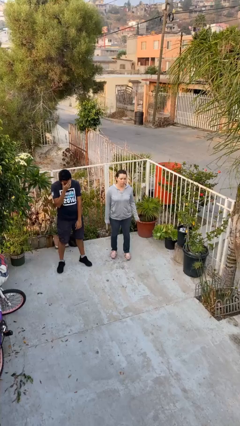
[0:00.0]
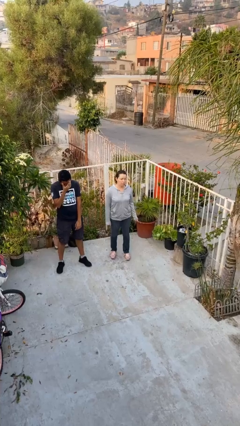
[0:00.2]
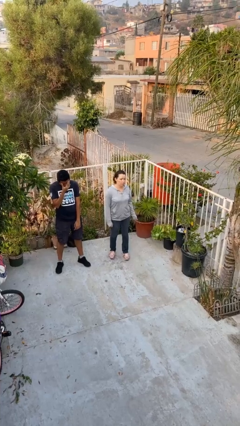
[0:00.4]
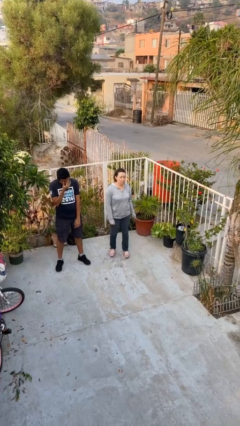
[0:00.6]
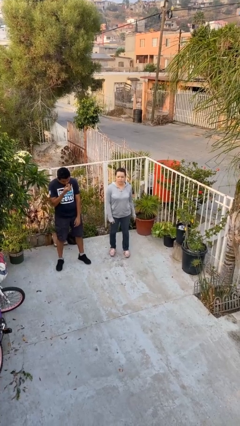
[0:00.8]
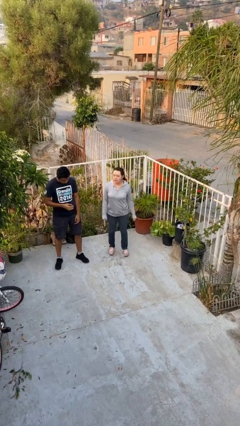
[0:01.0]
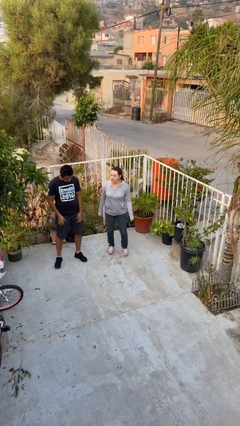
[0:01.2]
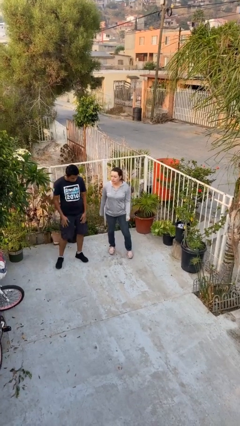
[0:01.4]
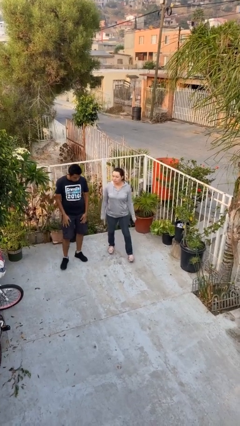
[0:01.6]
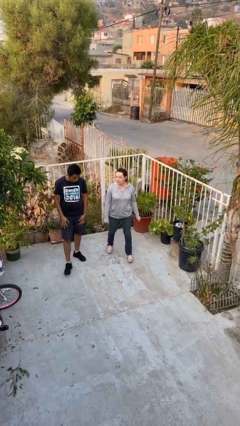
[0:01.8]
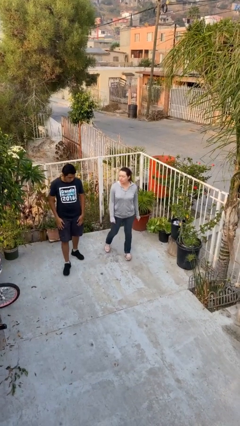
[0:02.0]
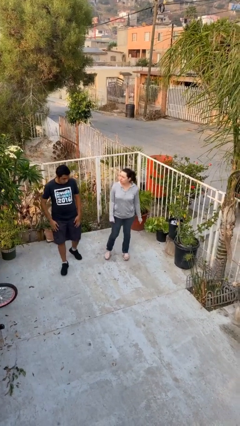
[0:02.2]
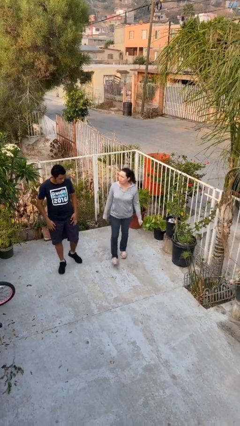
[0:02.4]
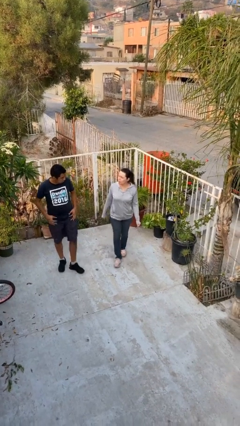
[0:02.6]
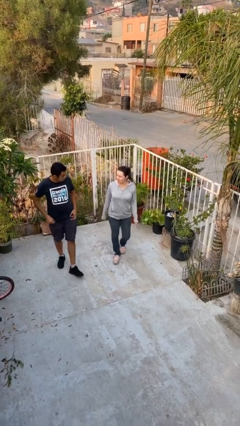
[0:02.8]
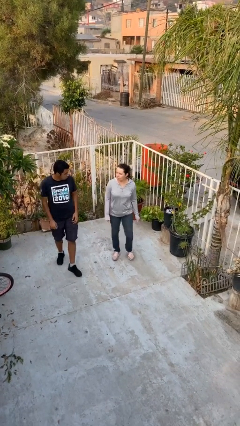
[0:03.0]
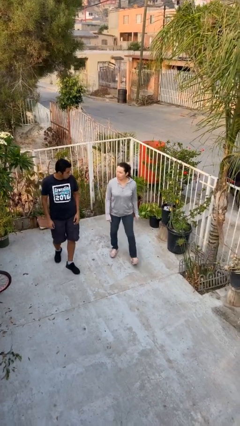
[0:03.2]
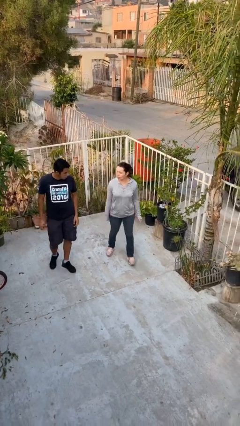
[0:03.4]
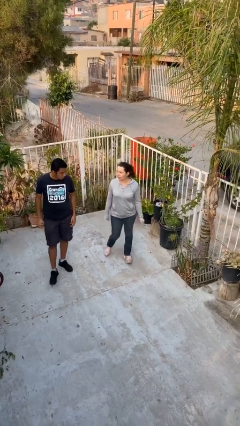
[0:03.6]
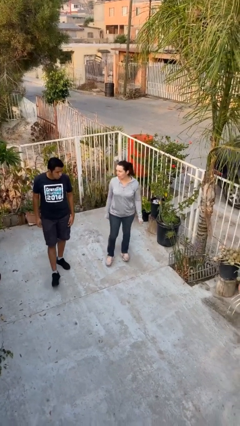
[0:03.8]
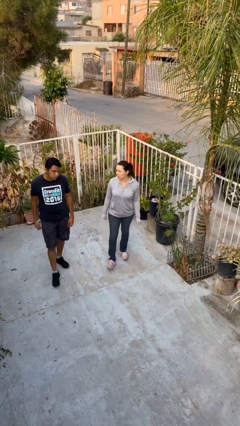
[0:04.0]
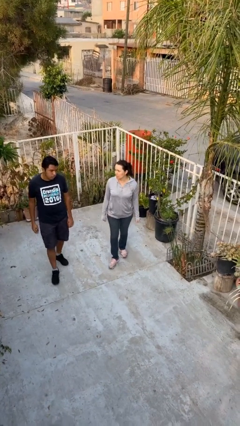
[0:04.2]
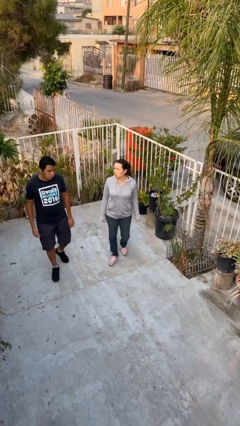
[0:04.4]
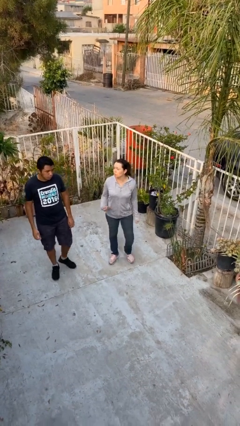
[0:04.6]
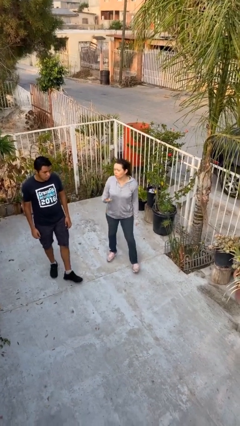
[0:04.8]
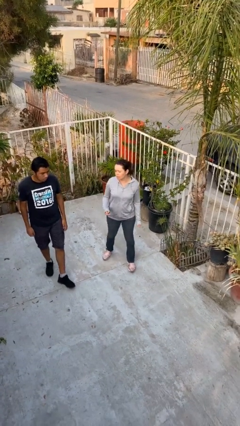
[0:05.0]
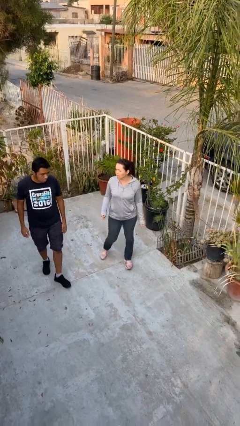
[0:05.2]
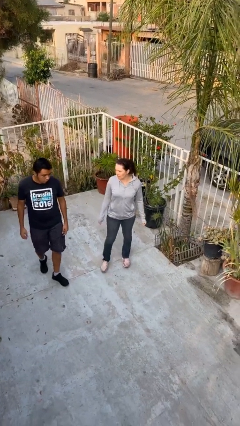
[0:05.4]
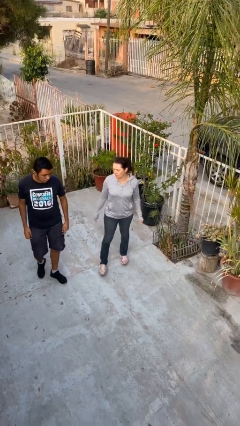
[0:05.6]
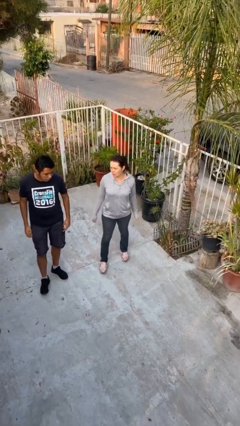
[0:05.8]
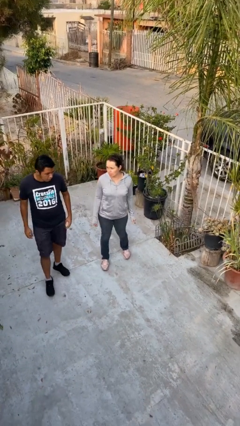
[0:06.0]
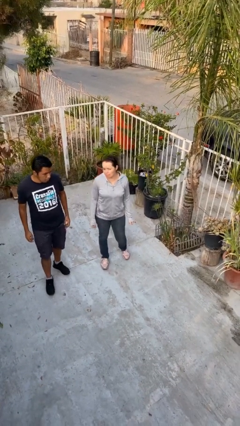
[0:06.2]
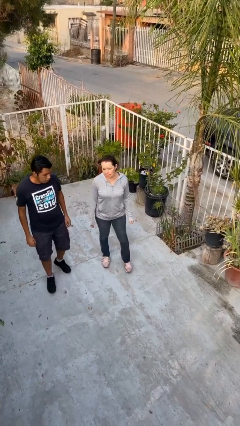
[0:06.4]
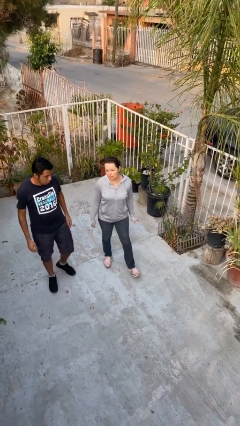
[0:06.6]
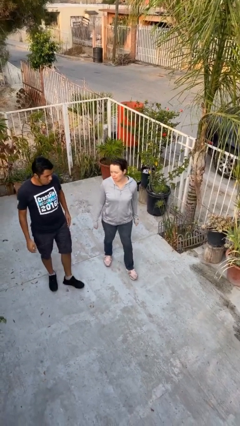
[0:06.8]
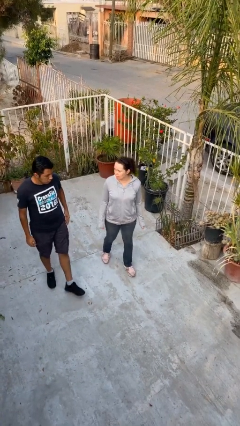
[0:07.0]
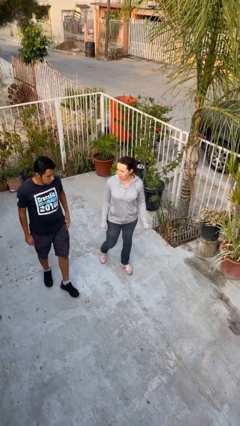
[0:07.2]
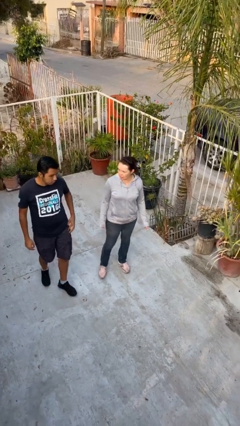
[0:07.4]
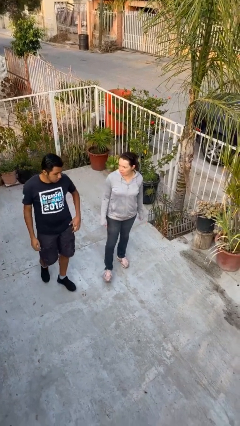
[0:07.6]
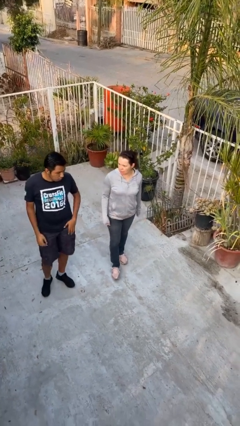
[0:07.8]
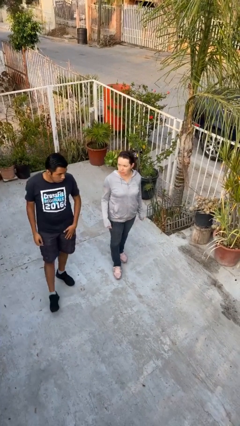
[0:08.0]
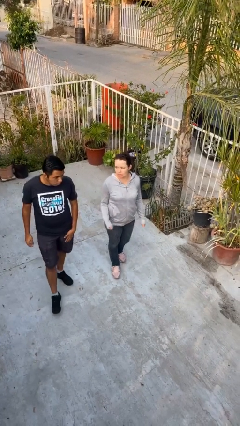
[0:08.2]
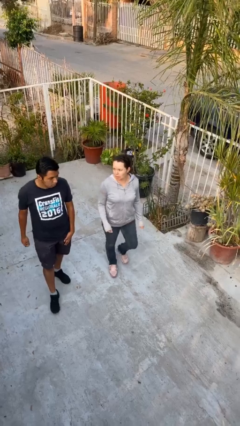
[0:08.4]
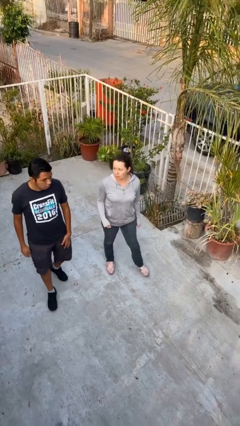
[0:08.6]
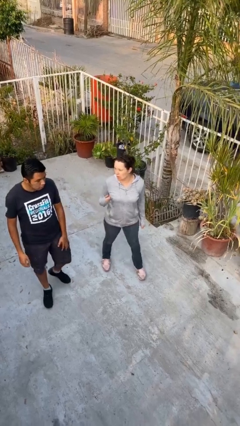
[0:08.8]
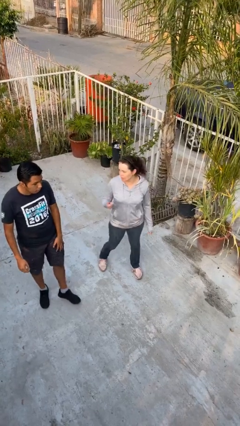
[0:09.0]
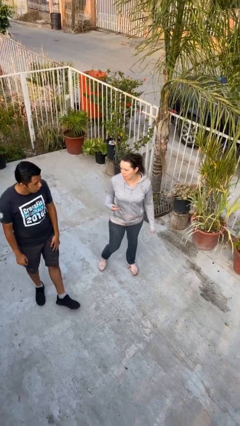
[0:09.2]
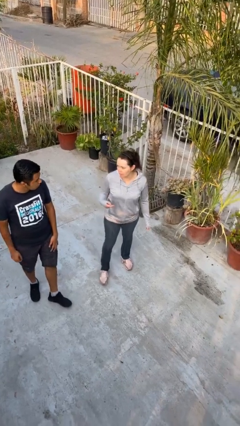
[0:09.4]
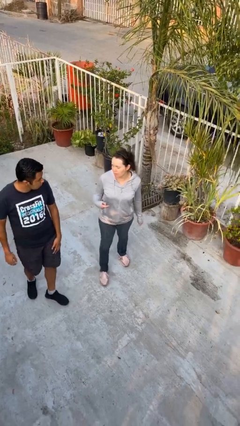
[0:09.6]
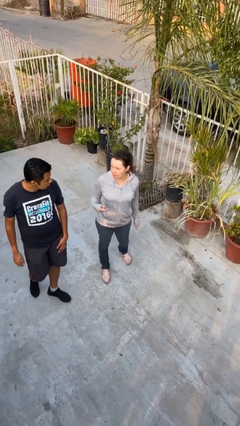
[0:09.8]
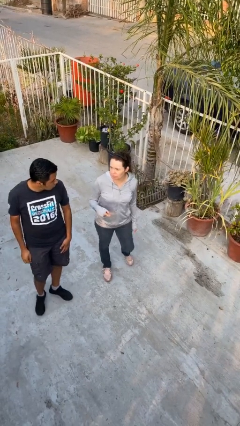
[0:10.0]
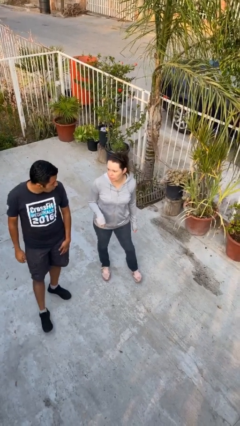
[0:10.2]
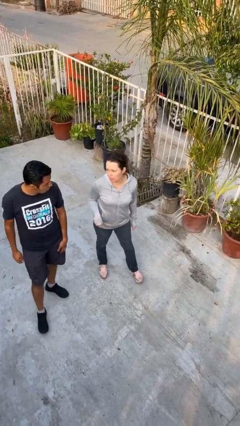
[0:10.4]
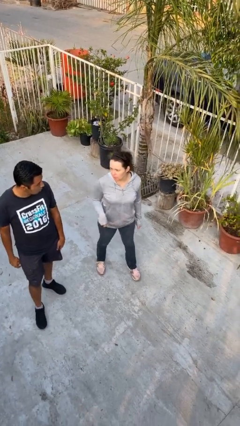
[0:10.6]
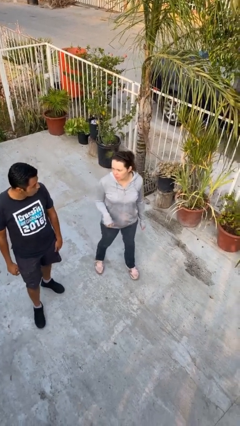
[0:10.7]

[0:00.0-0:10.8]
person talks to person

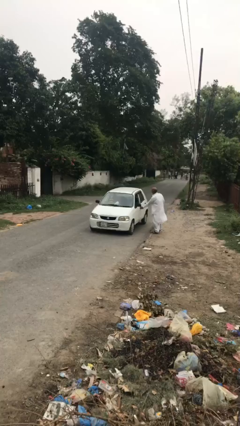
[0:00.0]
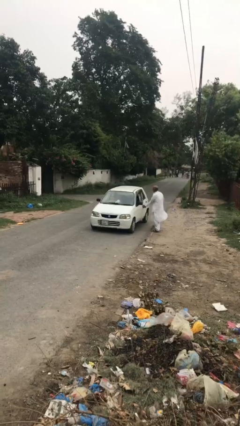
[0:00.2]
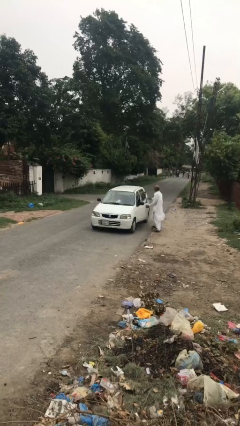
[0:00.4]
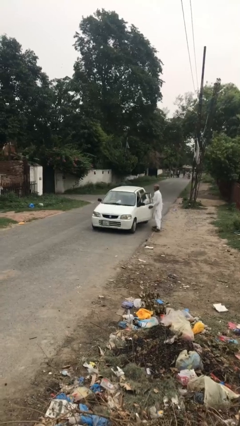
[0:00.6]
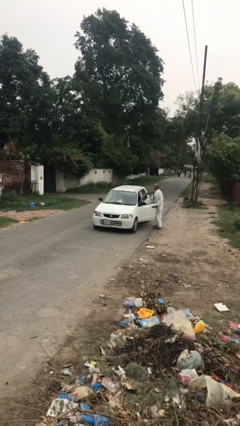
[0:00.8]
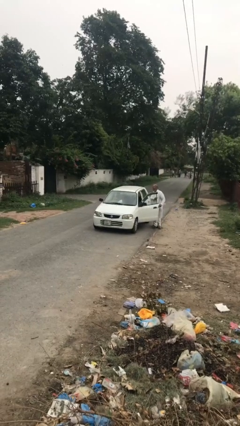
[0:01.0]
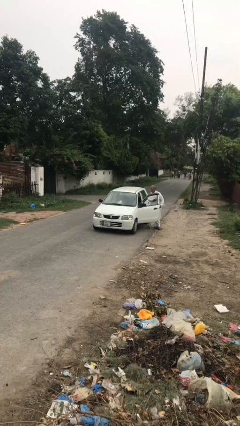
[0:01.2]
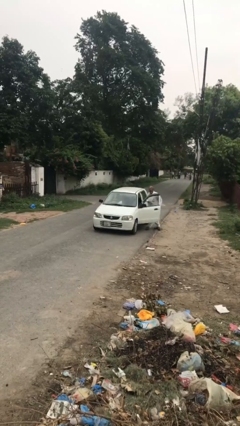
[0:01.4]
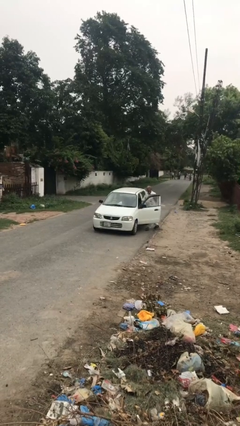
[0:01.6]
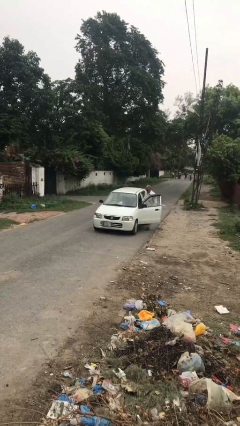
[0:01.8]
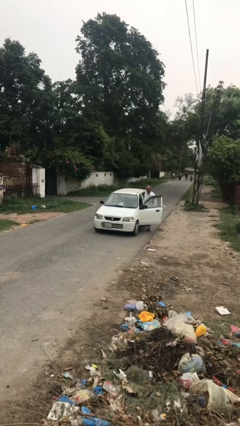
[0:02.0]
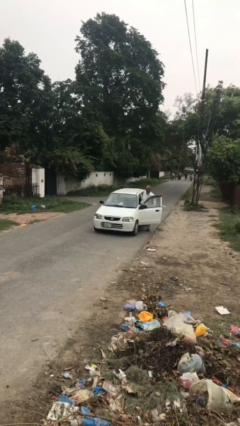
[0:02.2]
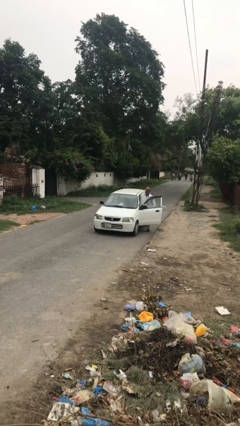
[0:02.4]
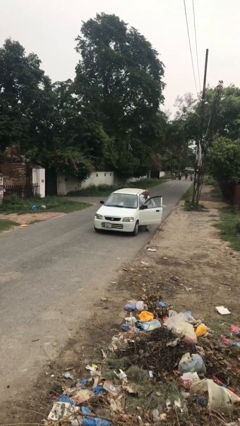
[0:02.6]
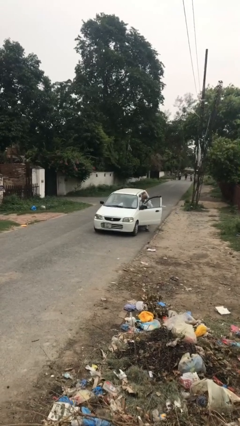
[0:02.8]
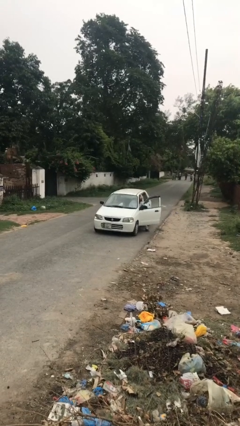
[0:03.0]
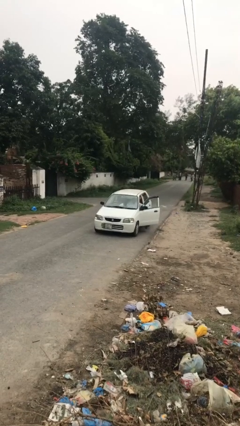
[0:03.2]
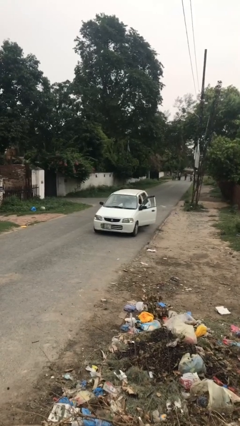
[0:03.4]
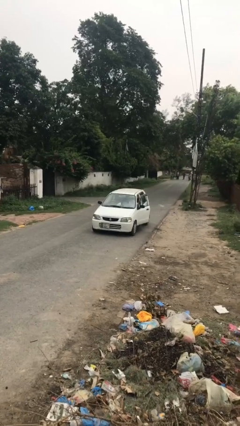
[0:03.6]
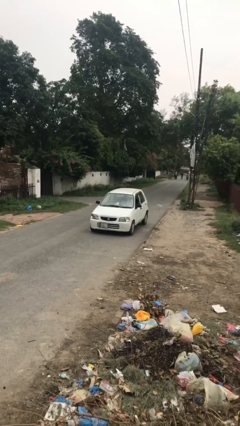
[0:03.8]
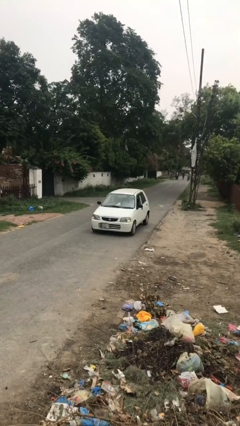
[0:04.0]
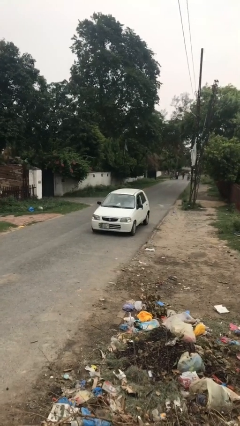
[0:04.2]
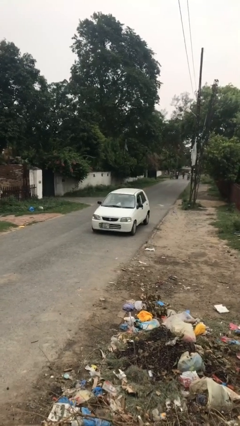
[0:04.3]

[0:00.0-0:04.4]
car picks up person

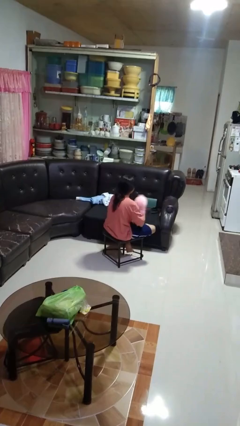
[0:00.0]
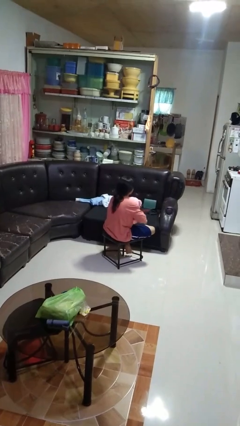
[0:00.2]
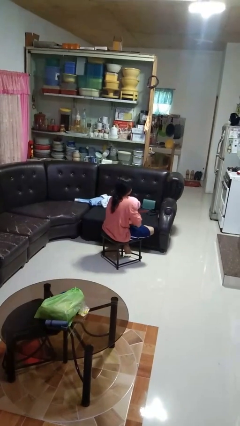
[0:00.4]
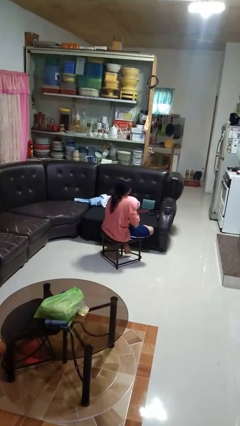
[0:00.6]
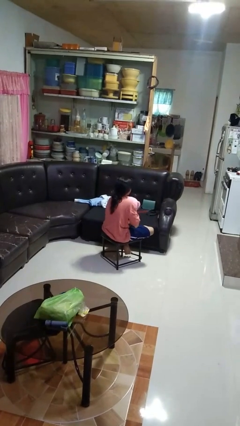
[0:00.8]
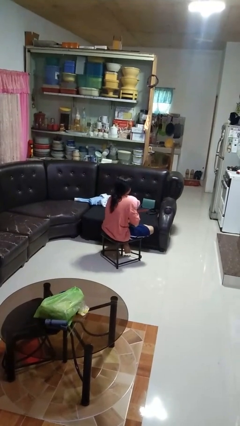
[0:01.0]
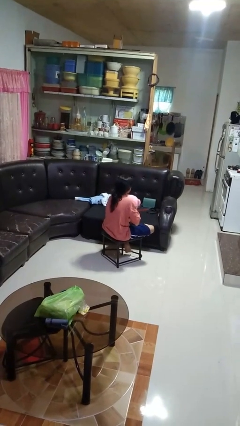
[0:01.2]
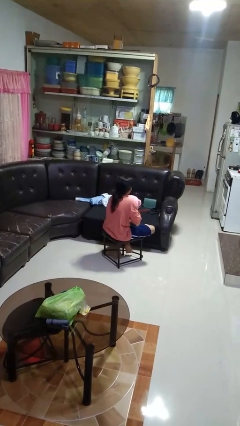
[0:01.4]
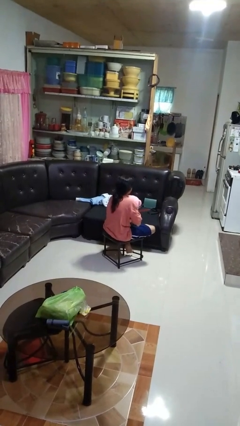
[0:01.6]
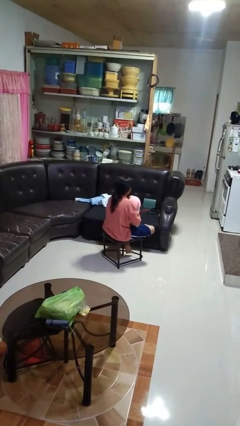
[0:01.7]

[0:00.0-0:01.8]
person hugs stuffed animal

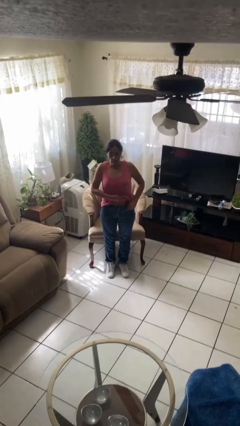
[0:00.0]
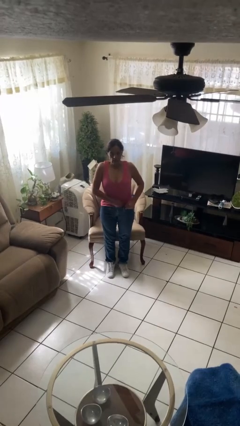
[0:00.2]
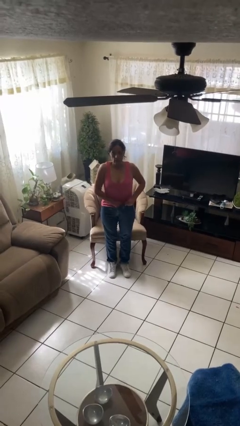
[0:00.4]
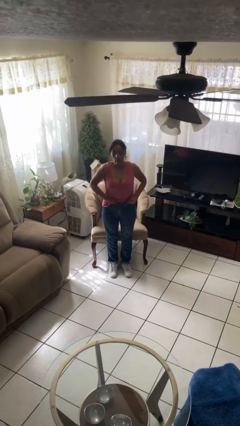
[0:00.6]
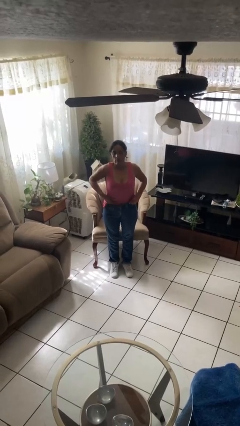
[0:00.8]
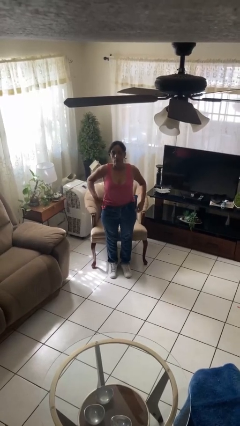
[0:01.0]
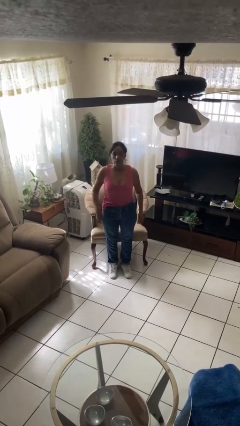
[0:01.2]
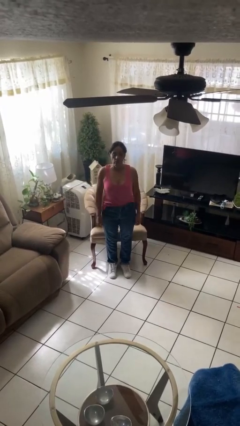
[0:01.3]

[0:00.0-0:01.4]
person tucks in shirt
